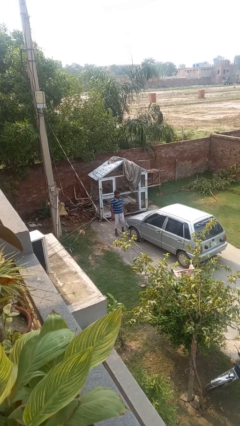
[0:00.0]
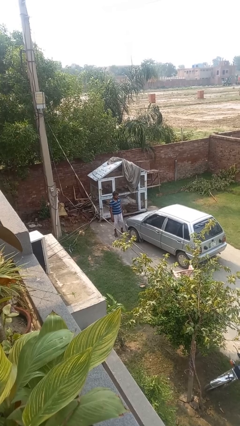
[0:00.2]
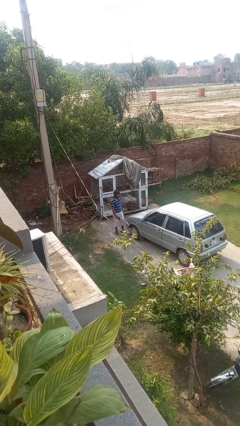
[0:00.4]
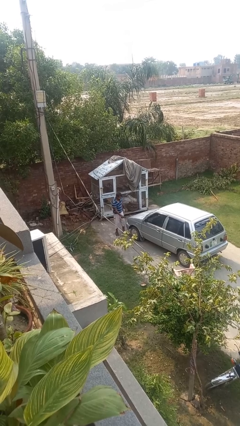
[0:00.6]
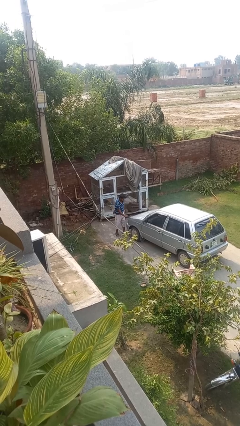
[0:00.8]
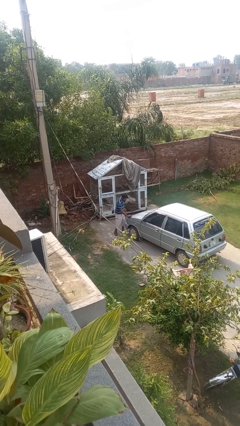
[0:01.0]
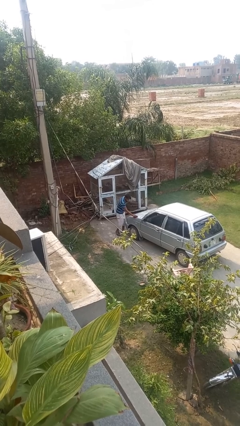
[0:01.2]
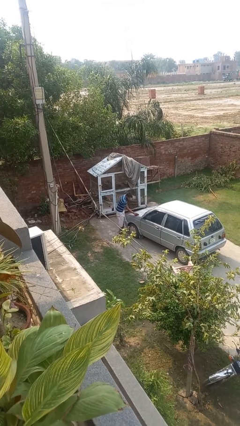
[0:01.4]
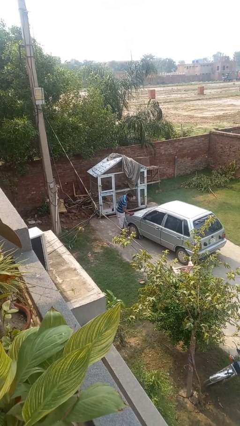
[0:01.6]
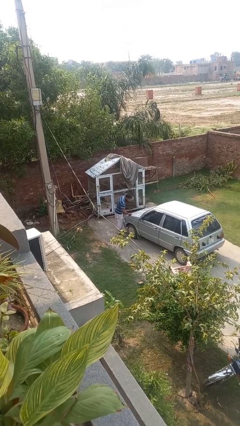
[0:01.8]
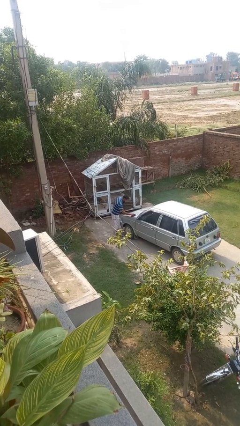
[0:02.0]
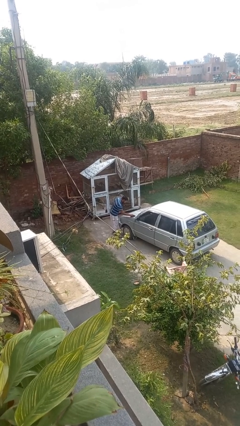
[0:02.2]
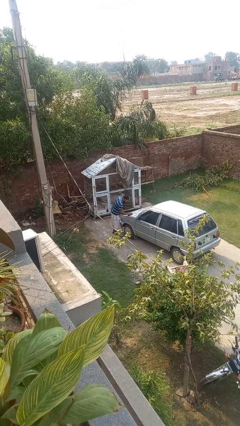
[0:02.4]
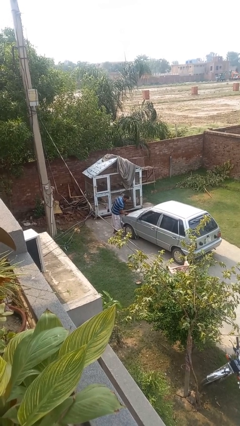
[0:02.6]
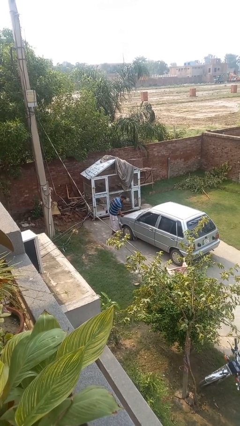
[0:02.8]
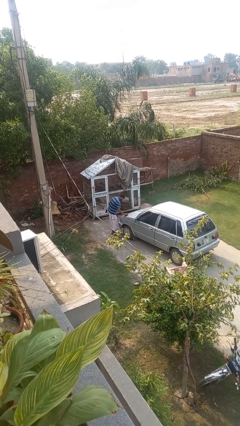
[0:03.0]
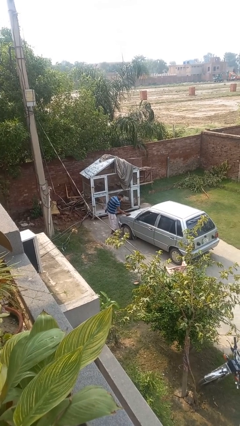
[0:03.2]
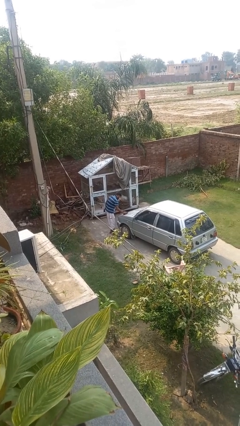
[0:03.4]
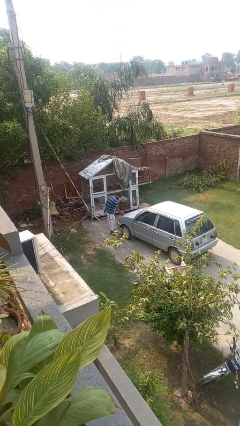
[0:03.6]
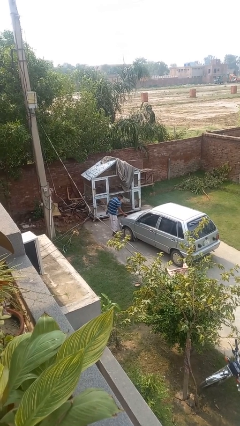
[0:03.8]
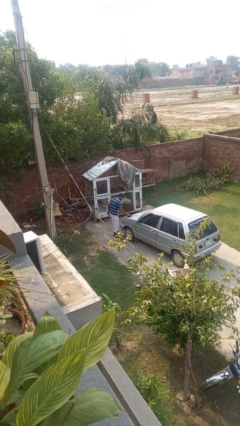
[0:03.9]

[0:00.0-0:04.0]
person polishes car with rag

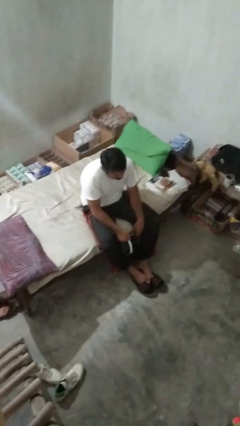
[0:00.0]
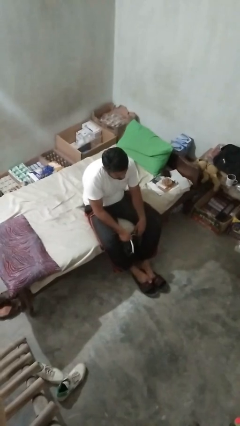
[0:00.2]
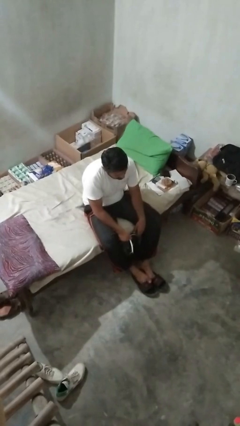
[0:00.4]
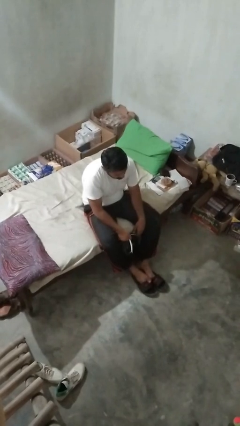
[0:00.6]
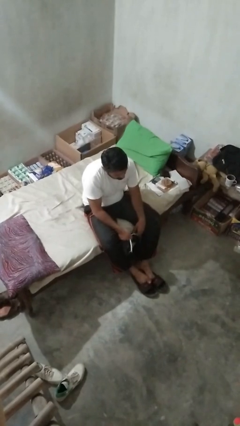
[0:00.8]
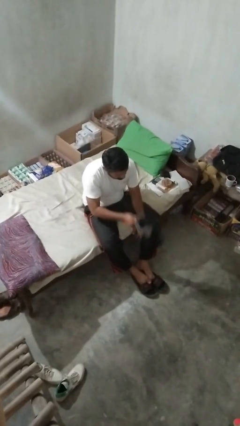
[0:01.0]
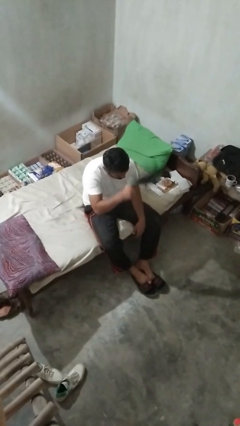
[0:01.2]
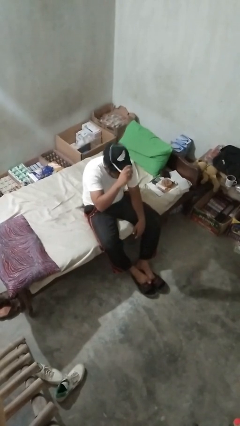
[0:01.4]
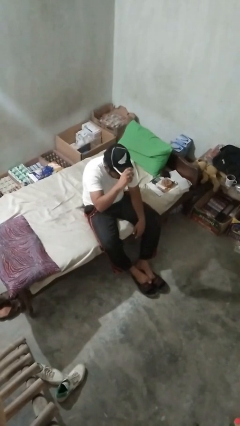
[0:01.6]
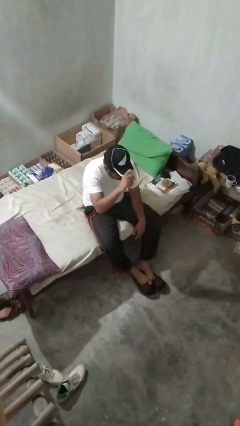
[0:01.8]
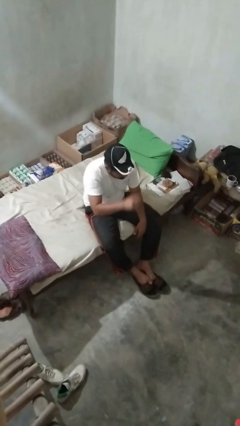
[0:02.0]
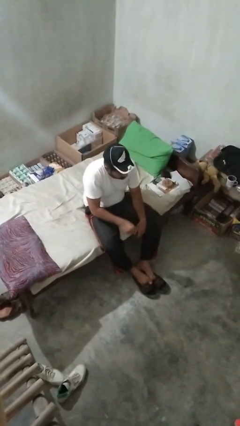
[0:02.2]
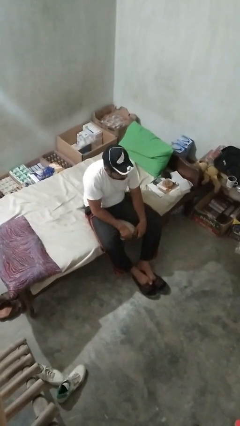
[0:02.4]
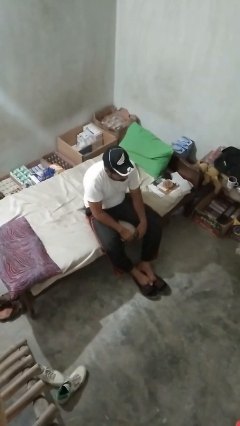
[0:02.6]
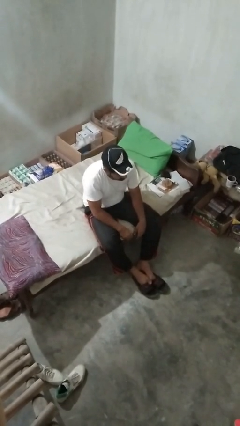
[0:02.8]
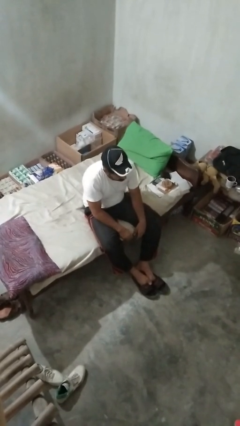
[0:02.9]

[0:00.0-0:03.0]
person puts on hat

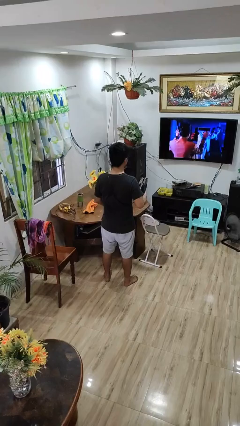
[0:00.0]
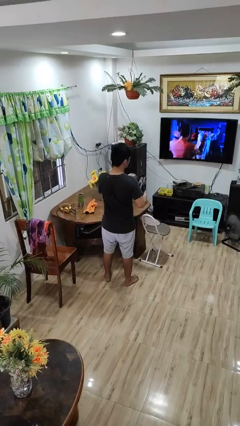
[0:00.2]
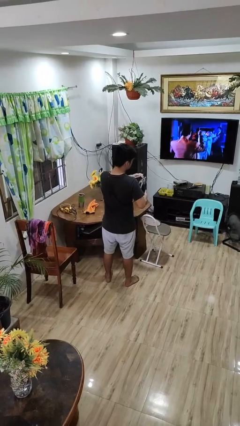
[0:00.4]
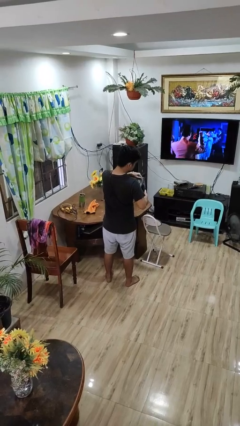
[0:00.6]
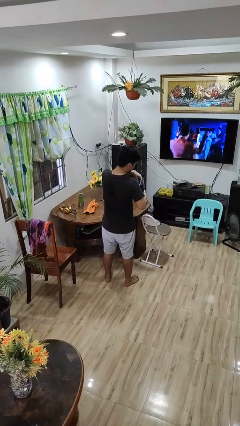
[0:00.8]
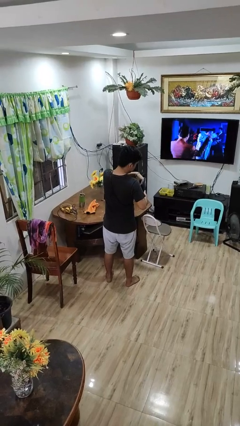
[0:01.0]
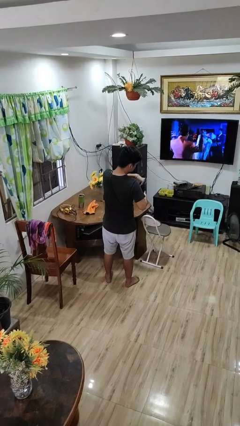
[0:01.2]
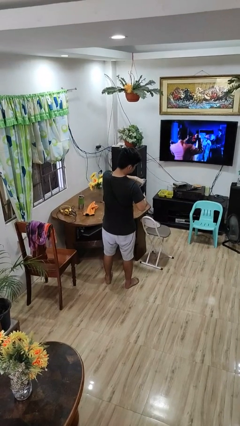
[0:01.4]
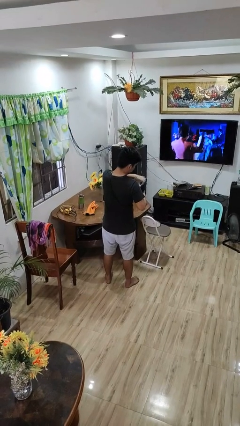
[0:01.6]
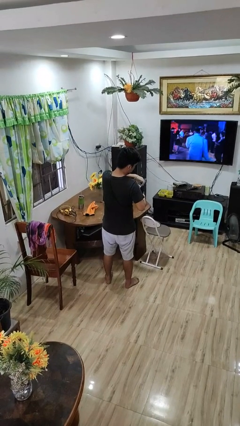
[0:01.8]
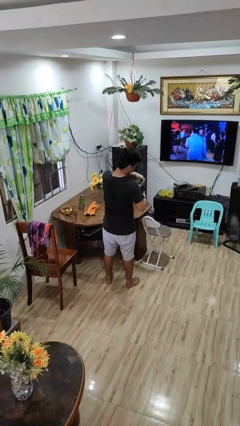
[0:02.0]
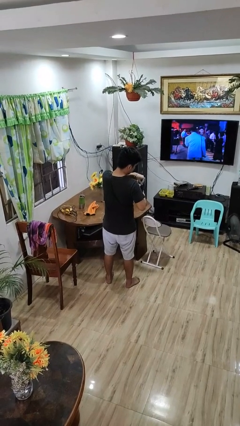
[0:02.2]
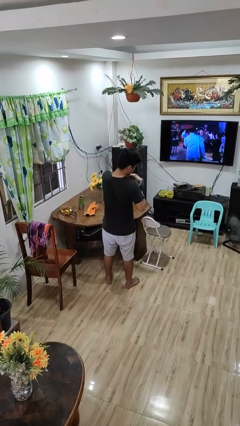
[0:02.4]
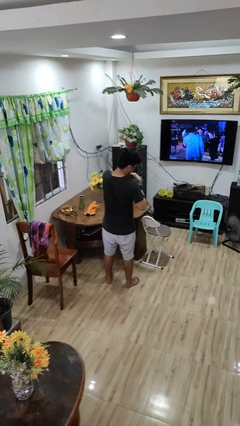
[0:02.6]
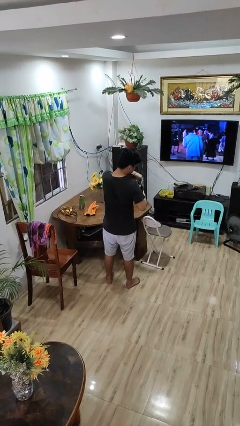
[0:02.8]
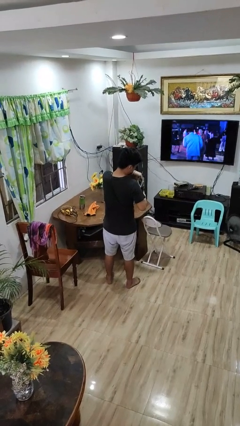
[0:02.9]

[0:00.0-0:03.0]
person searches in purse

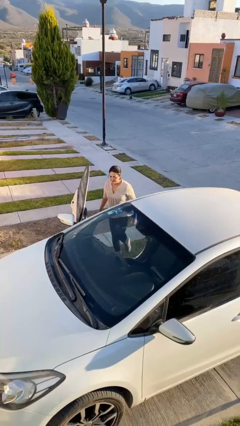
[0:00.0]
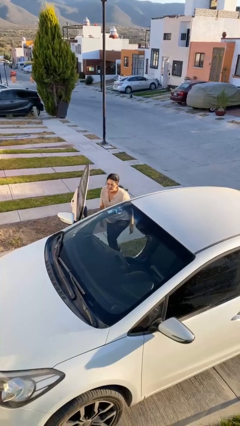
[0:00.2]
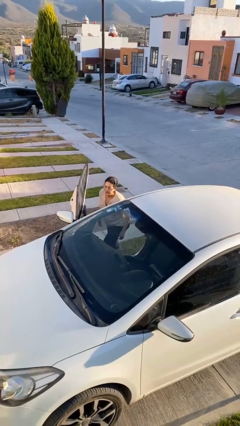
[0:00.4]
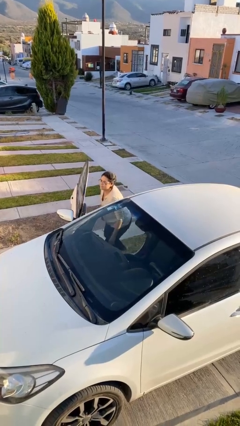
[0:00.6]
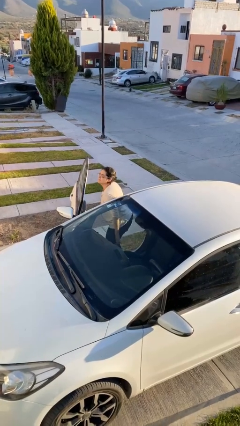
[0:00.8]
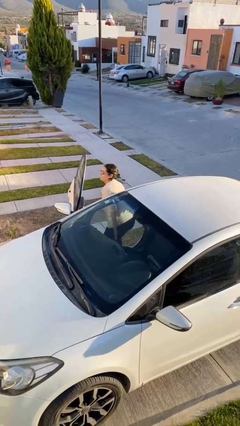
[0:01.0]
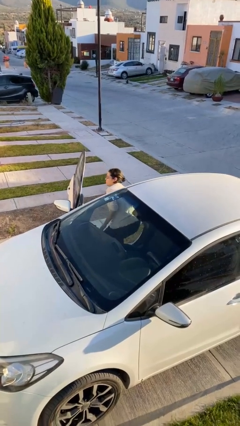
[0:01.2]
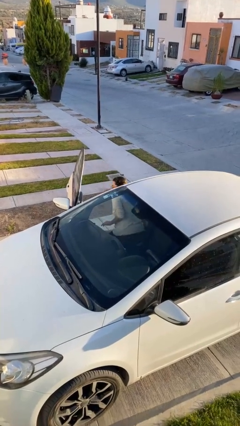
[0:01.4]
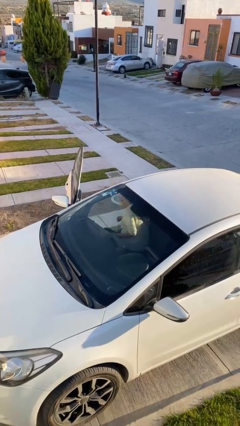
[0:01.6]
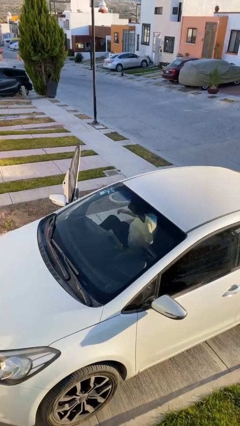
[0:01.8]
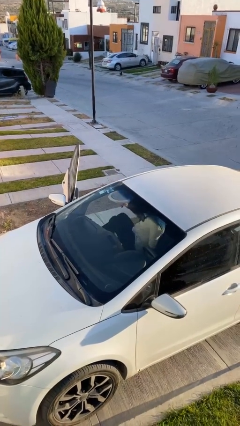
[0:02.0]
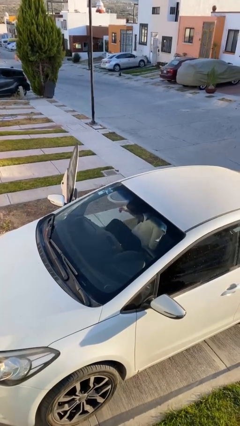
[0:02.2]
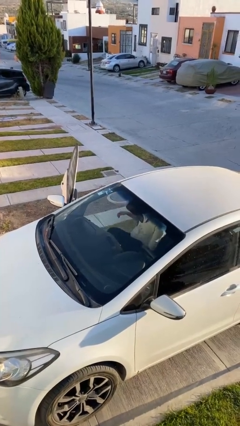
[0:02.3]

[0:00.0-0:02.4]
person enters car

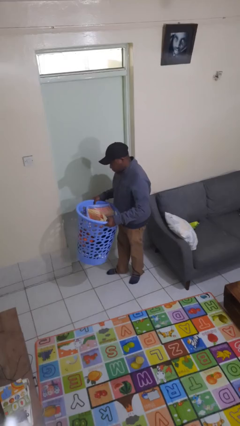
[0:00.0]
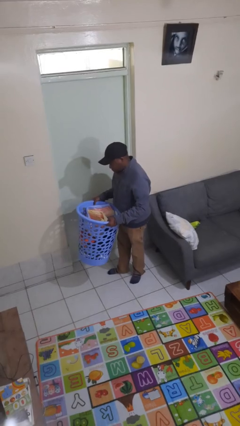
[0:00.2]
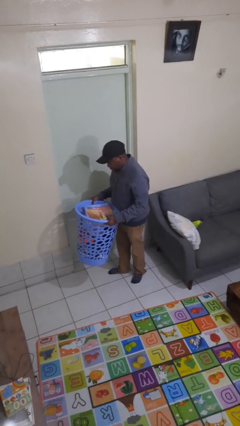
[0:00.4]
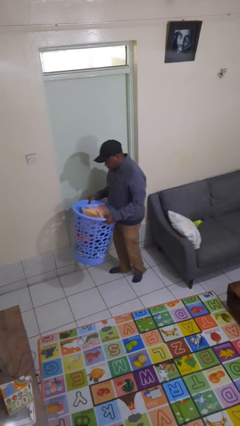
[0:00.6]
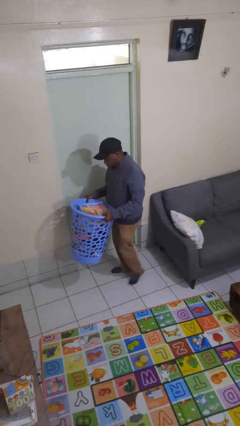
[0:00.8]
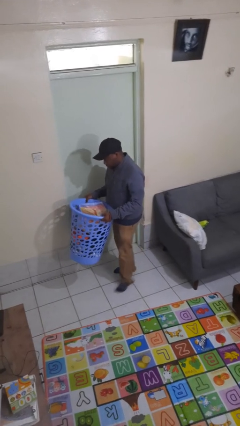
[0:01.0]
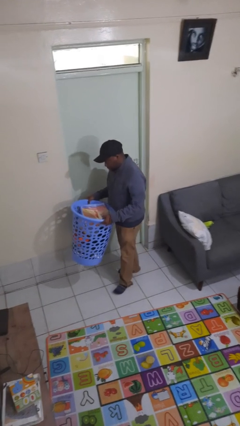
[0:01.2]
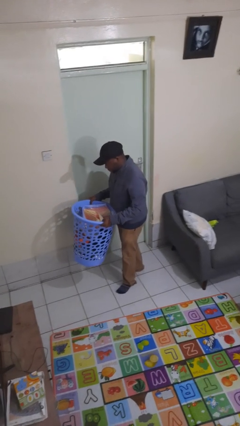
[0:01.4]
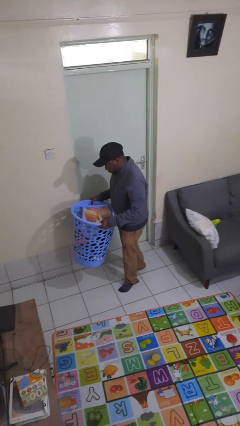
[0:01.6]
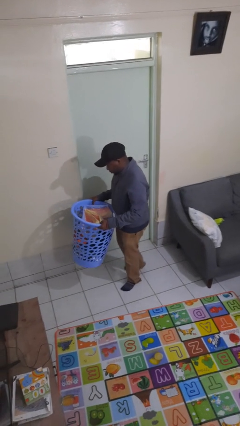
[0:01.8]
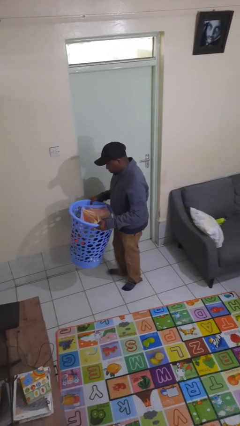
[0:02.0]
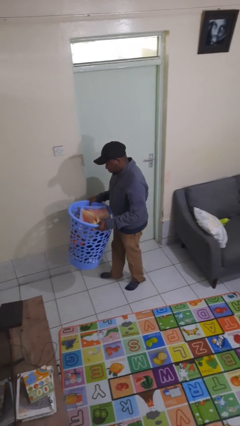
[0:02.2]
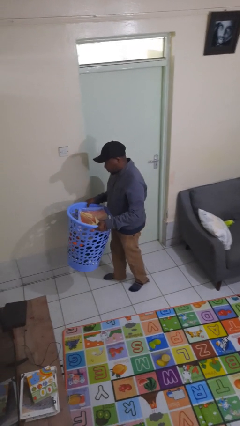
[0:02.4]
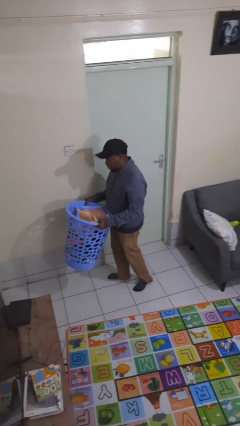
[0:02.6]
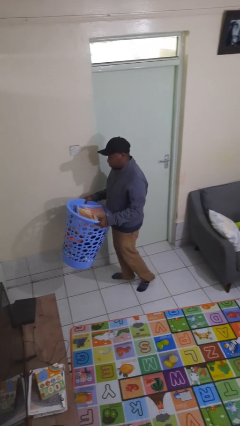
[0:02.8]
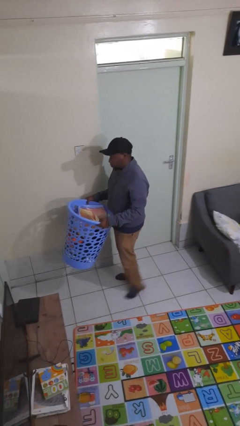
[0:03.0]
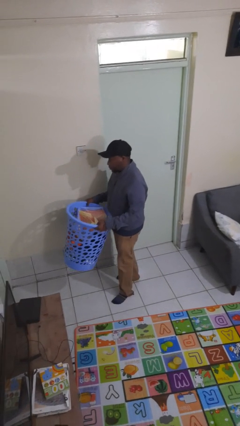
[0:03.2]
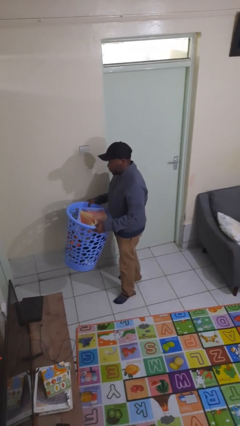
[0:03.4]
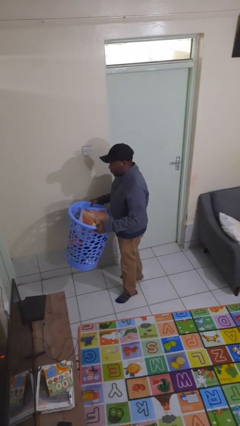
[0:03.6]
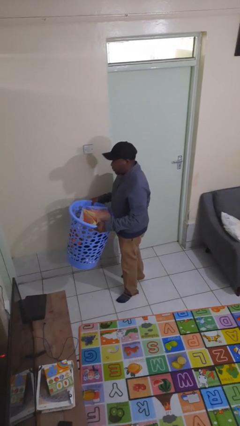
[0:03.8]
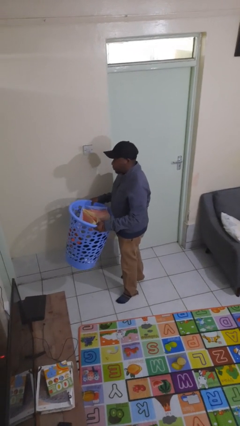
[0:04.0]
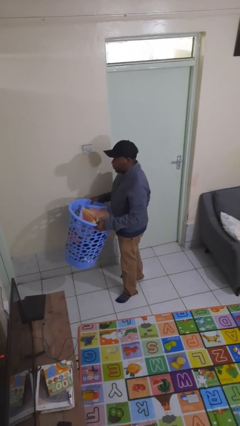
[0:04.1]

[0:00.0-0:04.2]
person carries laundry basket

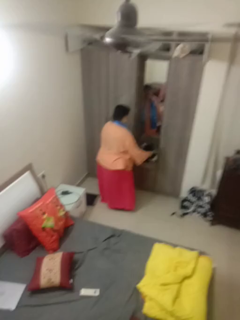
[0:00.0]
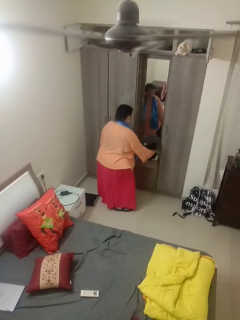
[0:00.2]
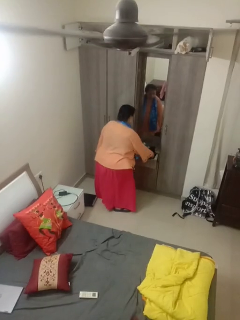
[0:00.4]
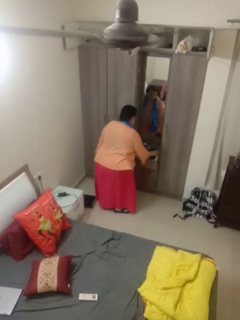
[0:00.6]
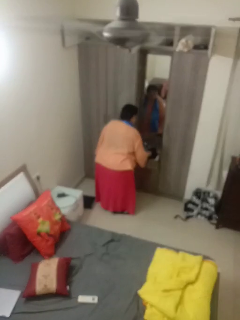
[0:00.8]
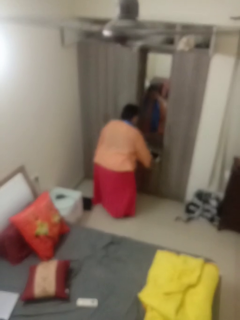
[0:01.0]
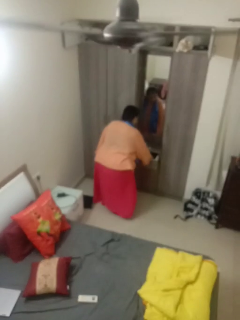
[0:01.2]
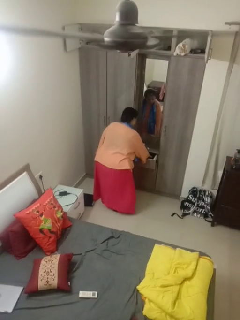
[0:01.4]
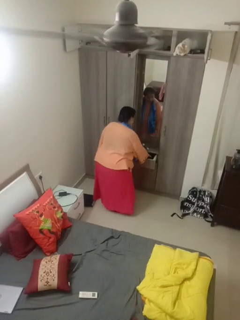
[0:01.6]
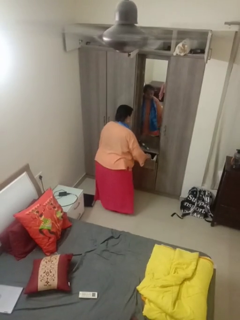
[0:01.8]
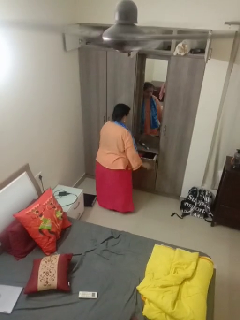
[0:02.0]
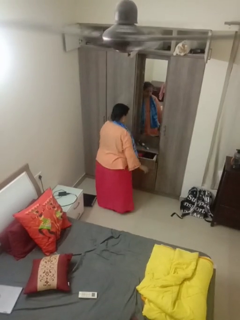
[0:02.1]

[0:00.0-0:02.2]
person puts clothes into dresser
